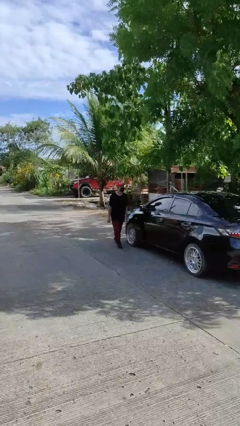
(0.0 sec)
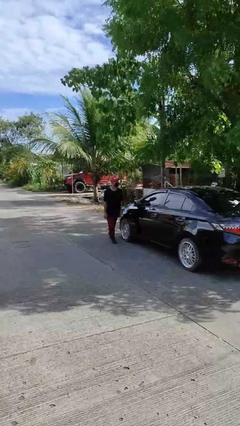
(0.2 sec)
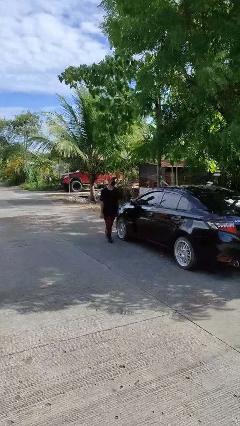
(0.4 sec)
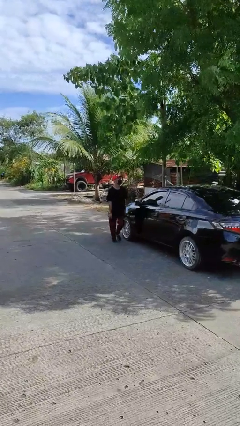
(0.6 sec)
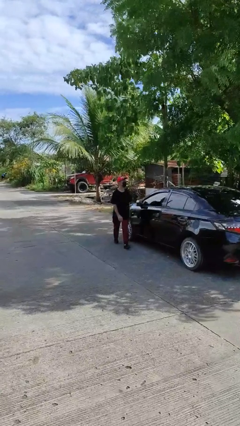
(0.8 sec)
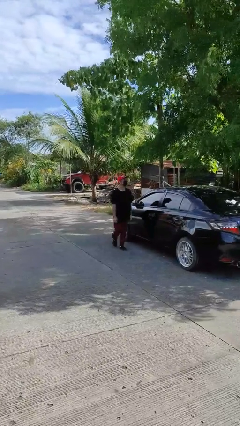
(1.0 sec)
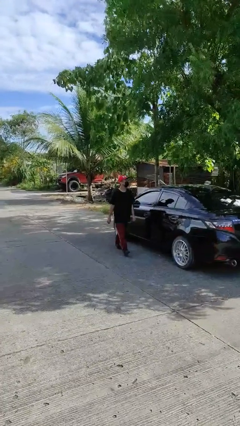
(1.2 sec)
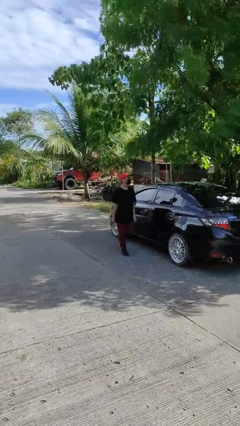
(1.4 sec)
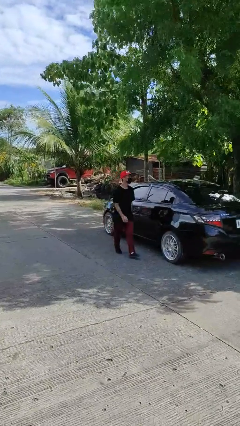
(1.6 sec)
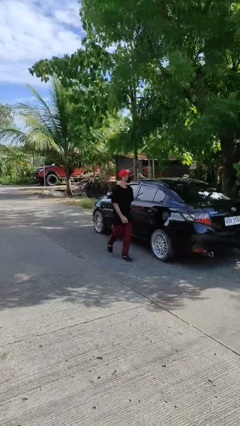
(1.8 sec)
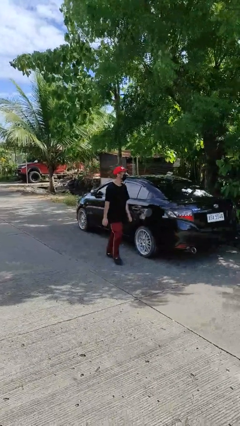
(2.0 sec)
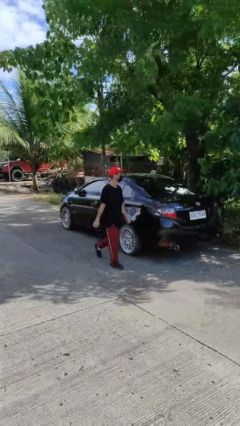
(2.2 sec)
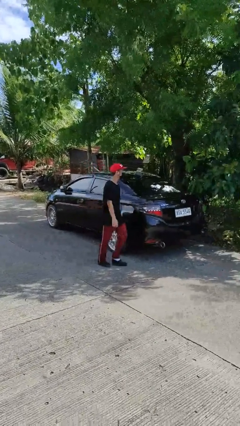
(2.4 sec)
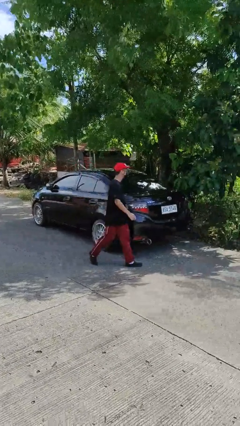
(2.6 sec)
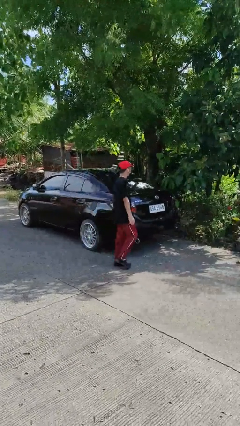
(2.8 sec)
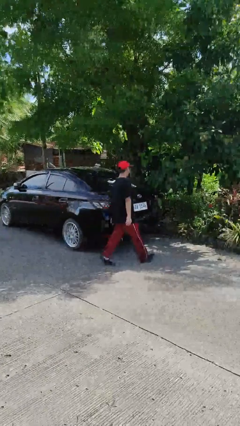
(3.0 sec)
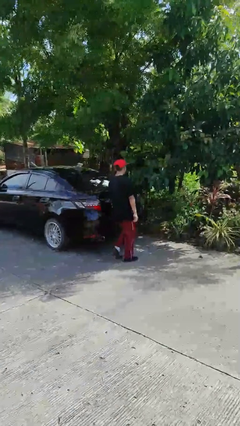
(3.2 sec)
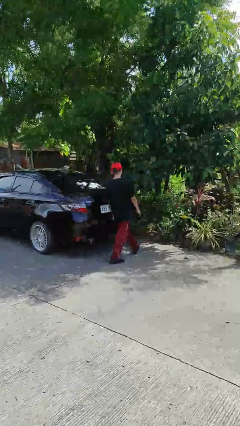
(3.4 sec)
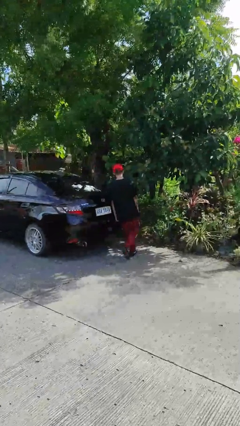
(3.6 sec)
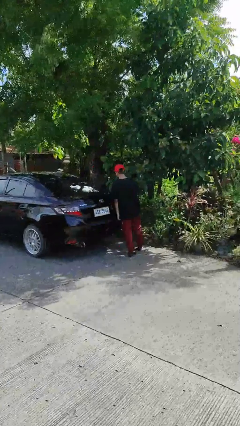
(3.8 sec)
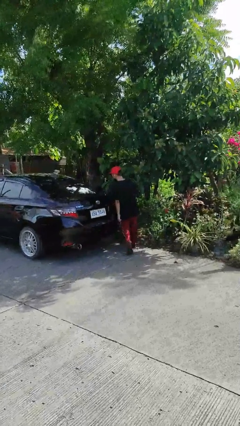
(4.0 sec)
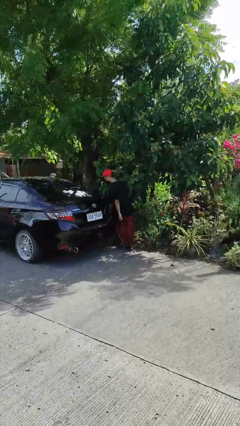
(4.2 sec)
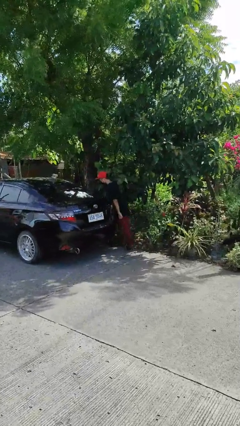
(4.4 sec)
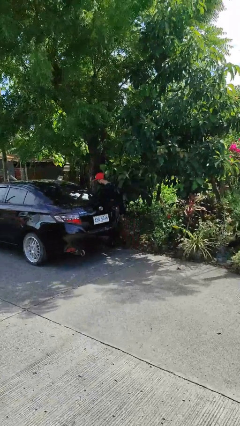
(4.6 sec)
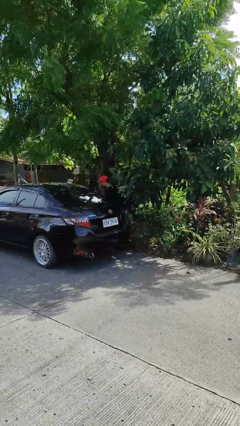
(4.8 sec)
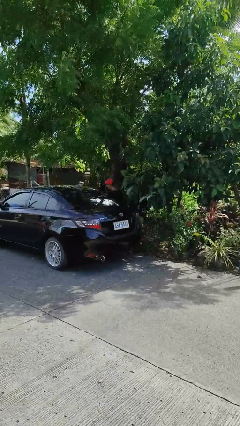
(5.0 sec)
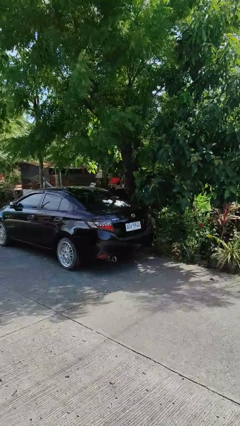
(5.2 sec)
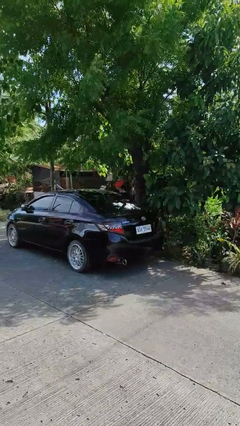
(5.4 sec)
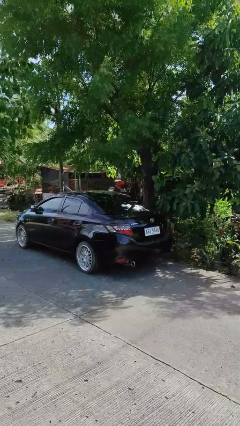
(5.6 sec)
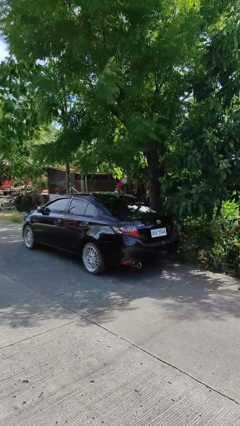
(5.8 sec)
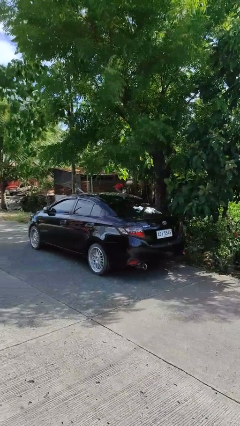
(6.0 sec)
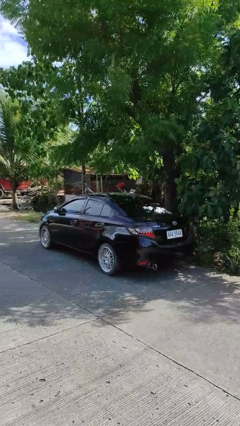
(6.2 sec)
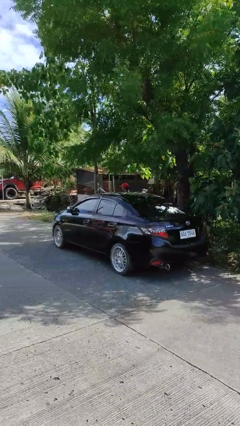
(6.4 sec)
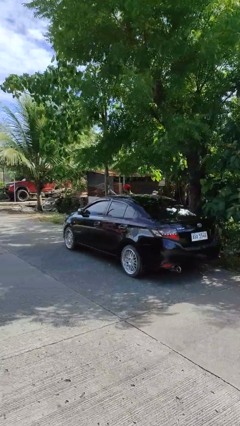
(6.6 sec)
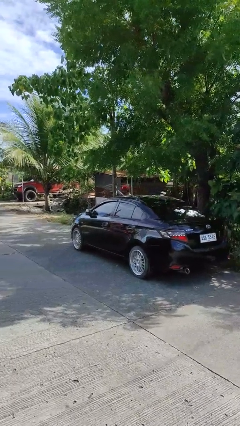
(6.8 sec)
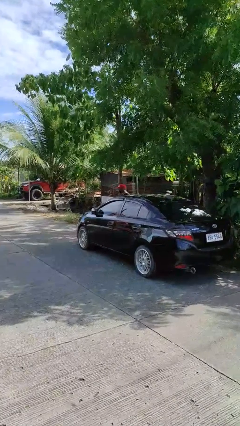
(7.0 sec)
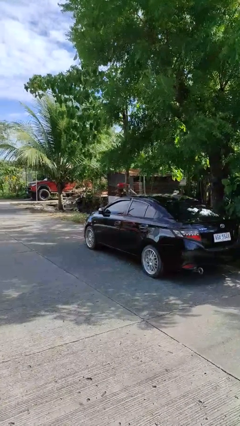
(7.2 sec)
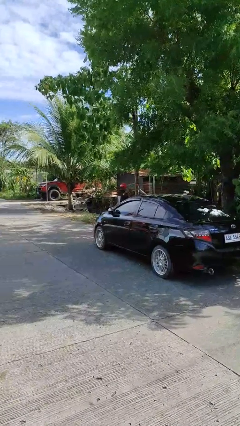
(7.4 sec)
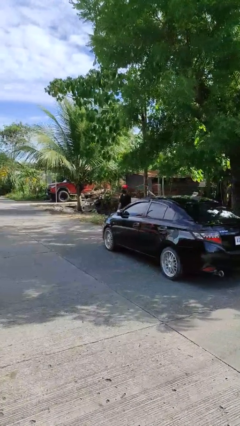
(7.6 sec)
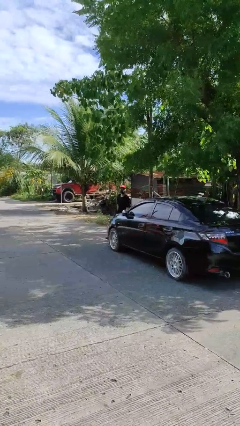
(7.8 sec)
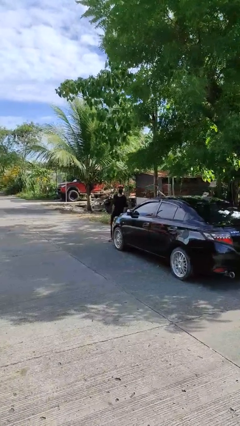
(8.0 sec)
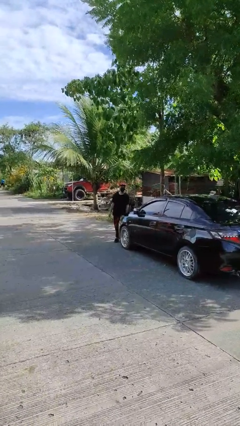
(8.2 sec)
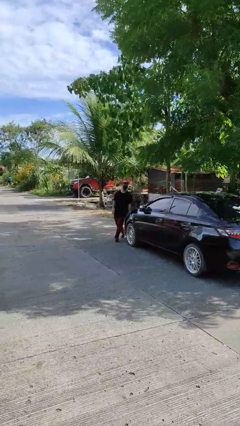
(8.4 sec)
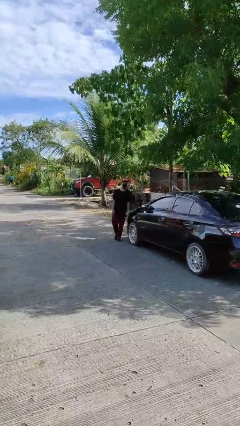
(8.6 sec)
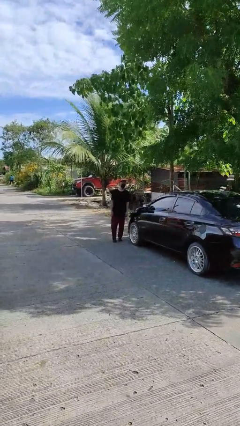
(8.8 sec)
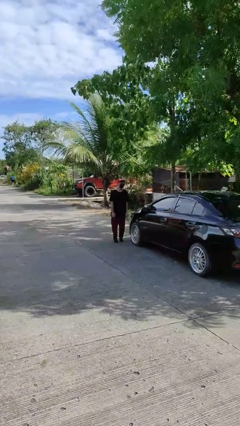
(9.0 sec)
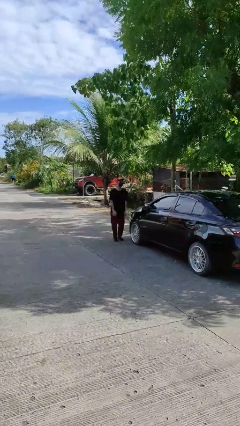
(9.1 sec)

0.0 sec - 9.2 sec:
person walks around car

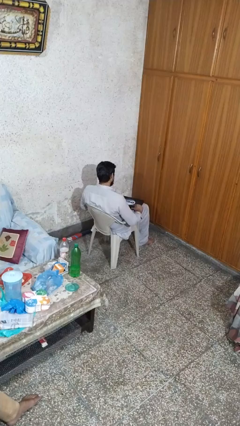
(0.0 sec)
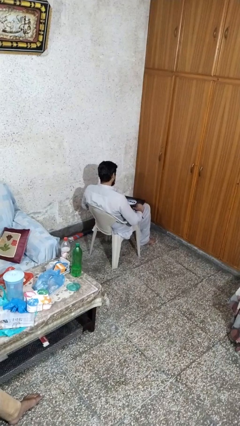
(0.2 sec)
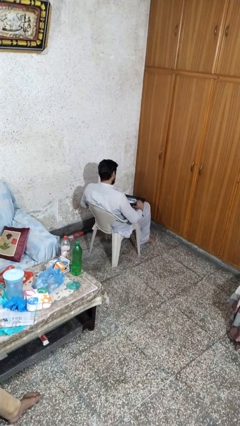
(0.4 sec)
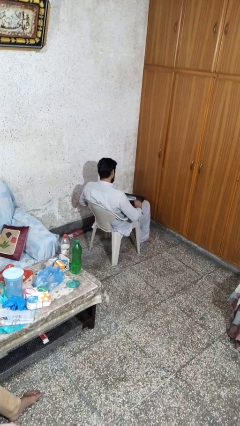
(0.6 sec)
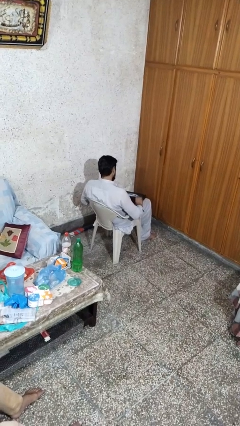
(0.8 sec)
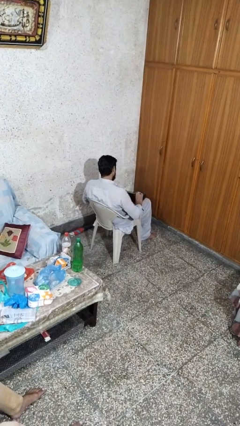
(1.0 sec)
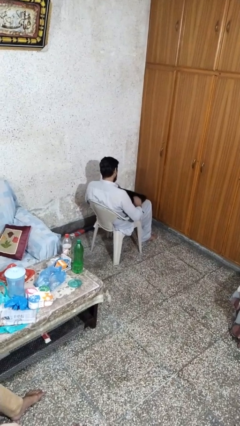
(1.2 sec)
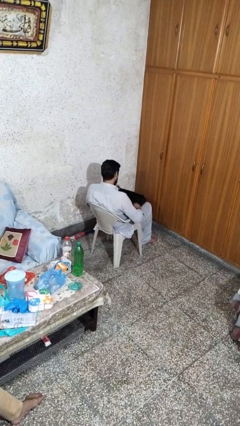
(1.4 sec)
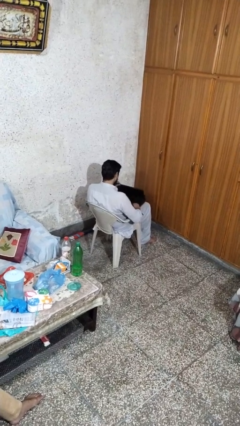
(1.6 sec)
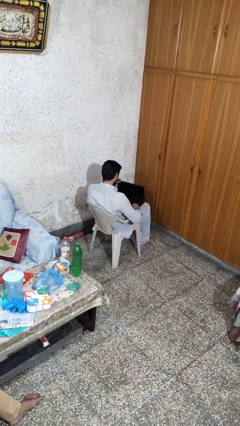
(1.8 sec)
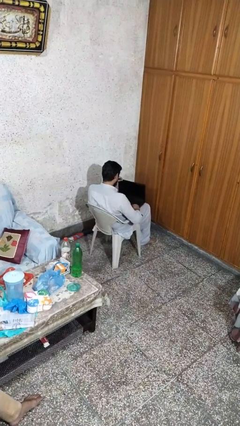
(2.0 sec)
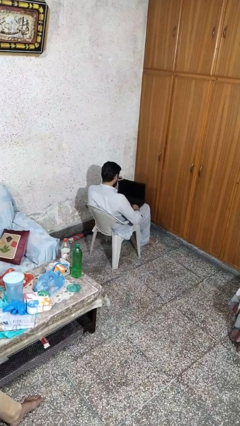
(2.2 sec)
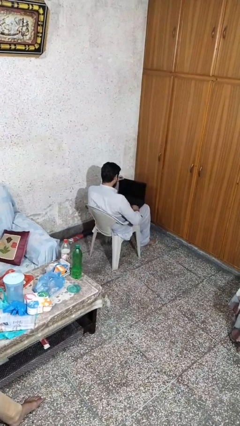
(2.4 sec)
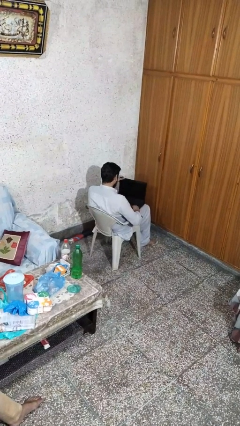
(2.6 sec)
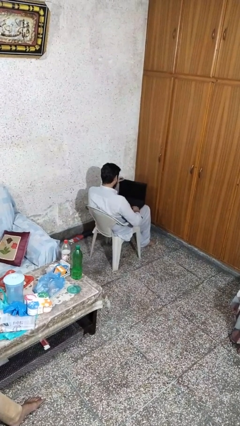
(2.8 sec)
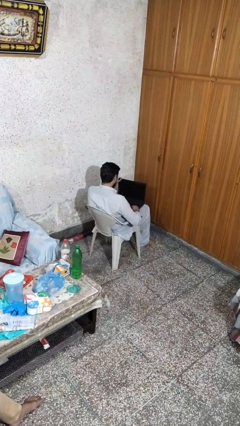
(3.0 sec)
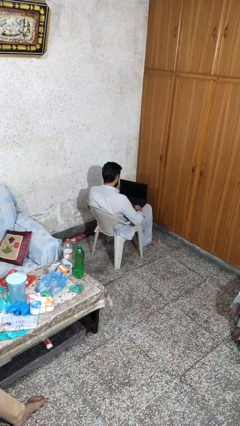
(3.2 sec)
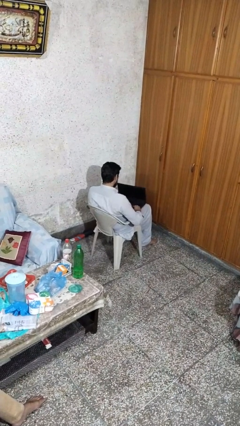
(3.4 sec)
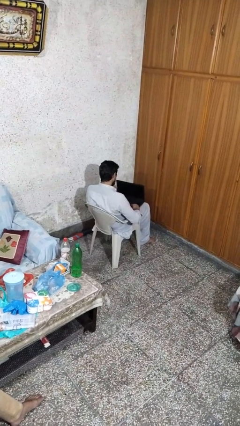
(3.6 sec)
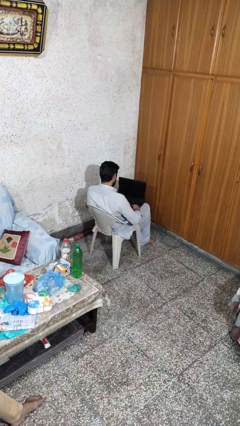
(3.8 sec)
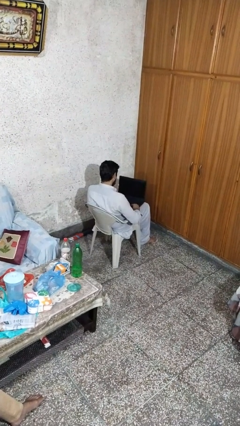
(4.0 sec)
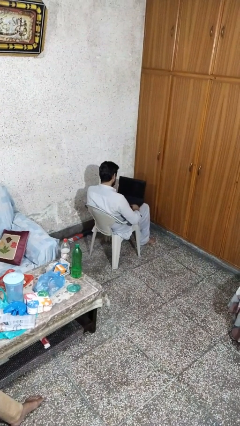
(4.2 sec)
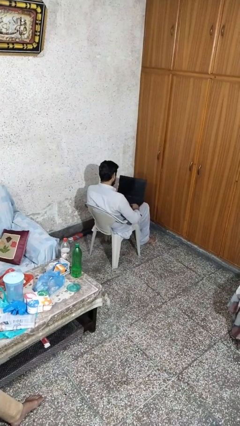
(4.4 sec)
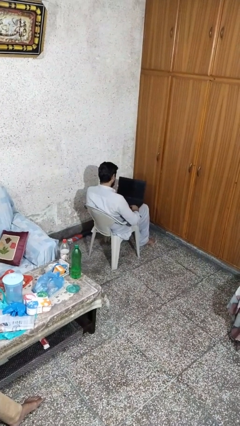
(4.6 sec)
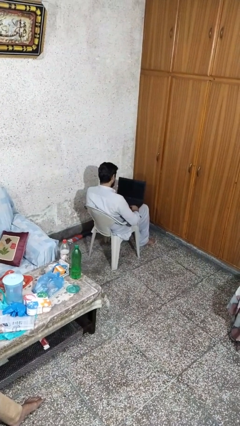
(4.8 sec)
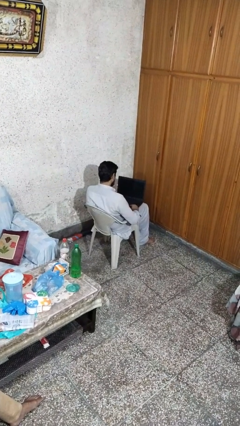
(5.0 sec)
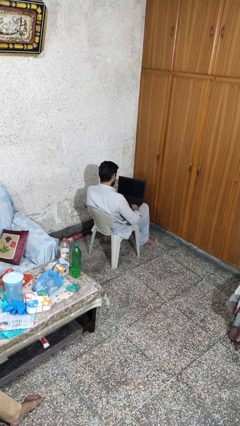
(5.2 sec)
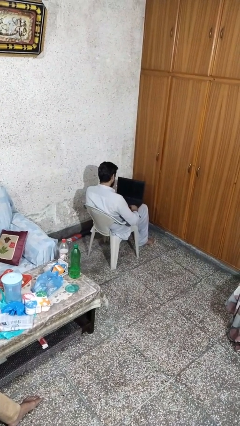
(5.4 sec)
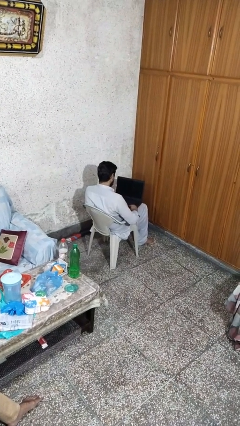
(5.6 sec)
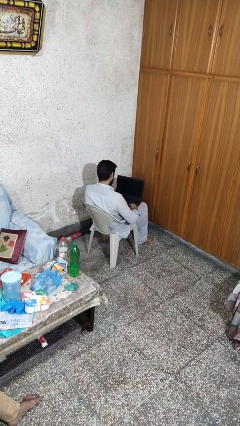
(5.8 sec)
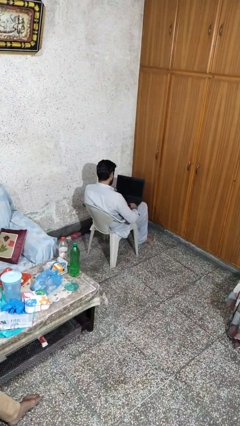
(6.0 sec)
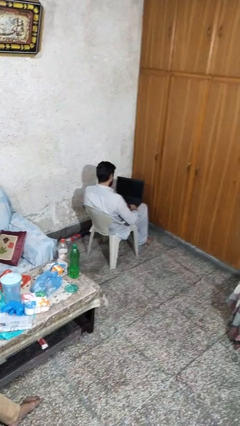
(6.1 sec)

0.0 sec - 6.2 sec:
person opens laptop

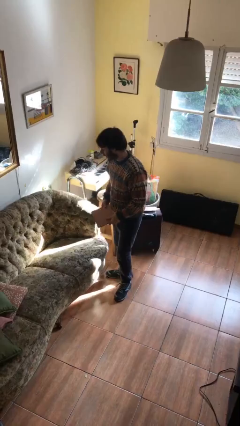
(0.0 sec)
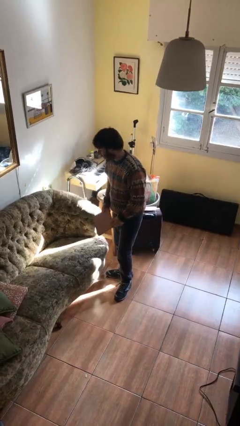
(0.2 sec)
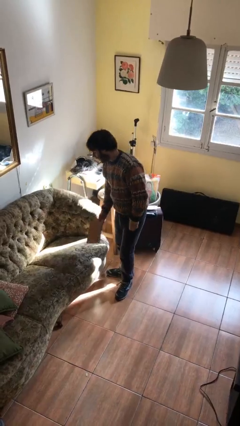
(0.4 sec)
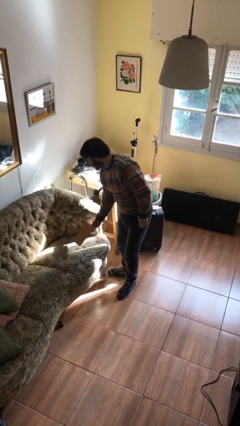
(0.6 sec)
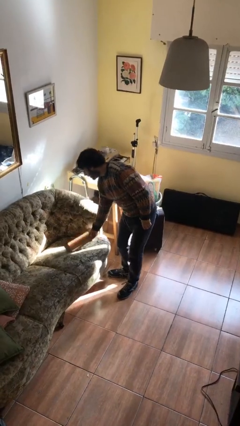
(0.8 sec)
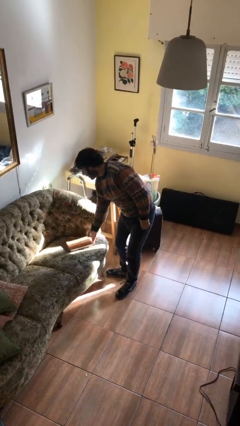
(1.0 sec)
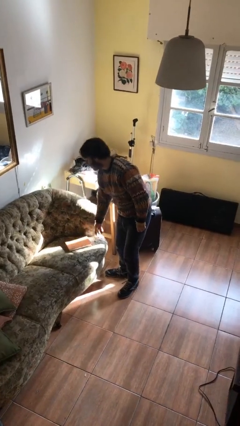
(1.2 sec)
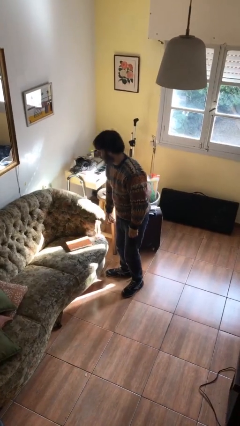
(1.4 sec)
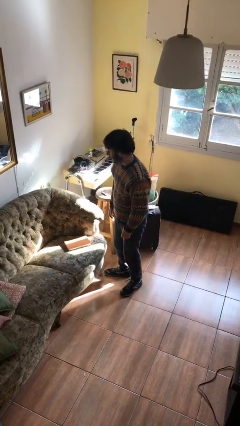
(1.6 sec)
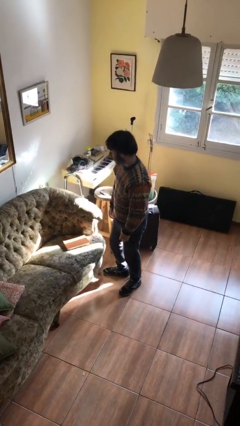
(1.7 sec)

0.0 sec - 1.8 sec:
person puts down object on couch

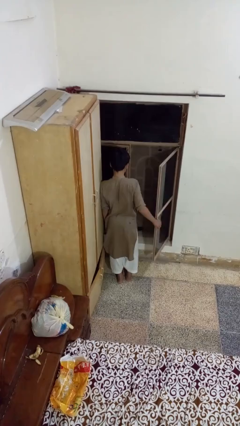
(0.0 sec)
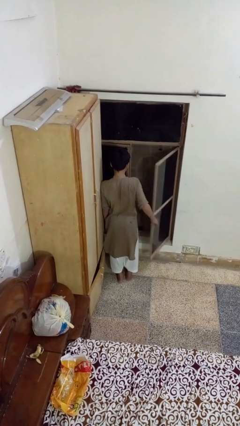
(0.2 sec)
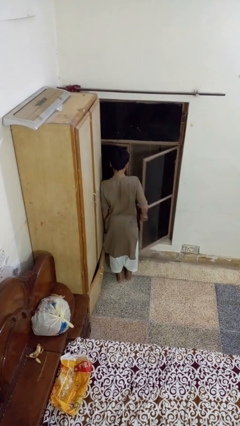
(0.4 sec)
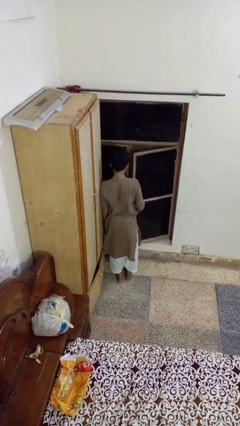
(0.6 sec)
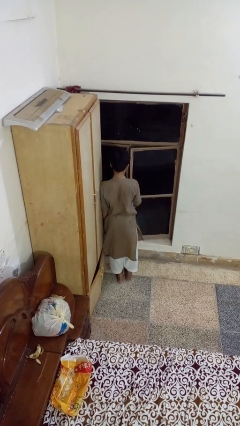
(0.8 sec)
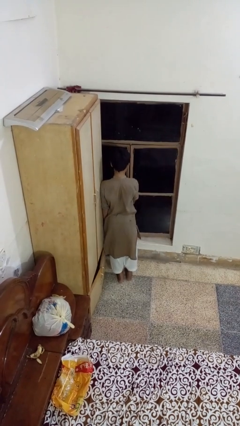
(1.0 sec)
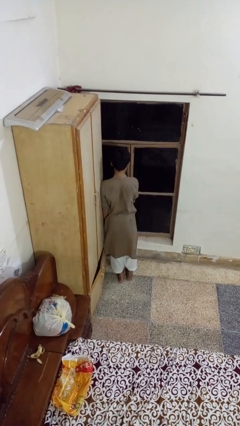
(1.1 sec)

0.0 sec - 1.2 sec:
person closes home window
